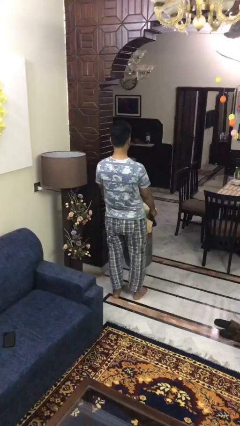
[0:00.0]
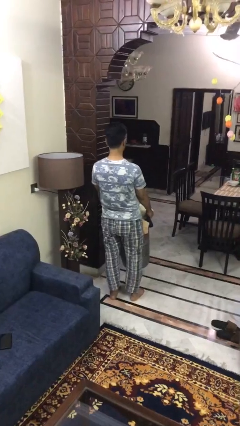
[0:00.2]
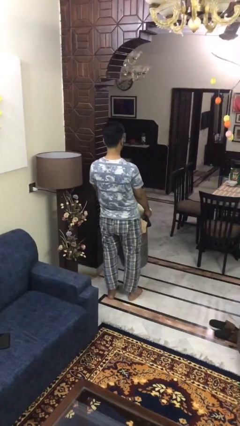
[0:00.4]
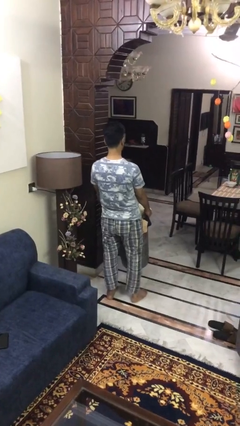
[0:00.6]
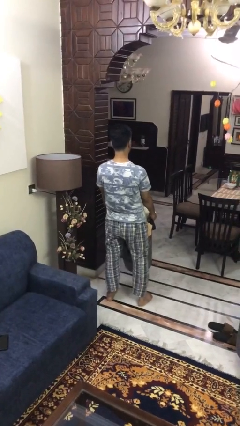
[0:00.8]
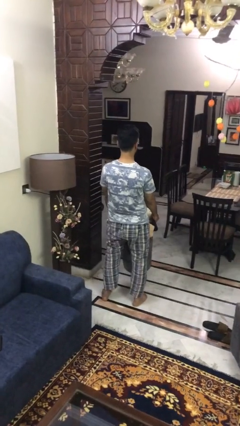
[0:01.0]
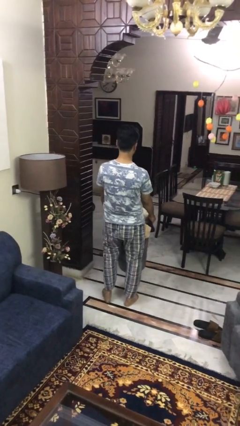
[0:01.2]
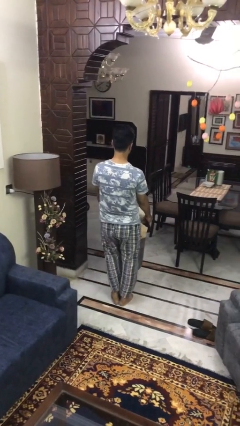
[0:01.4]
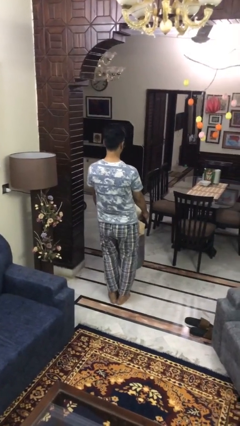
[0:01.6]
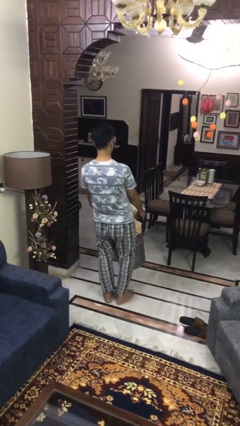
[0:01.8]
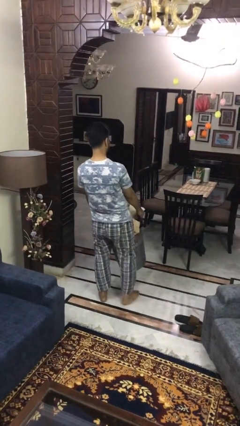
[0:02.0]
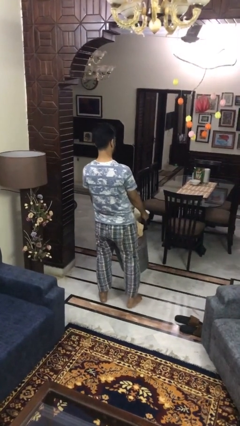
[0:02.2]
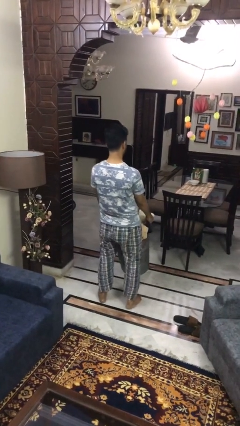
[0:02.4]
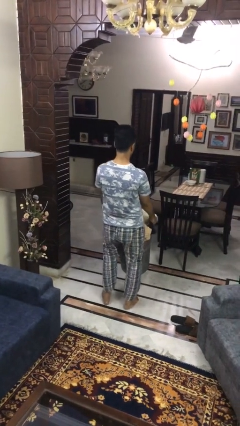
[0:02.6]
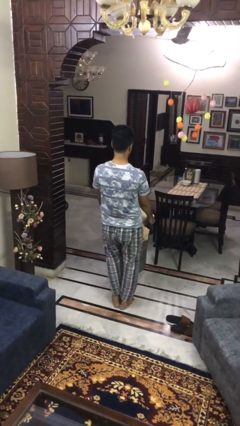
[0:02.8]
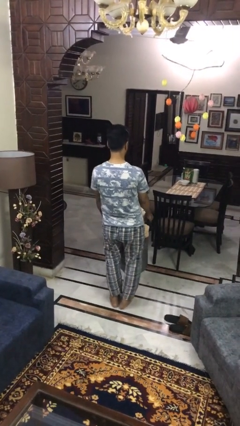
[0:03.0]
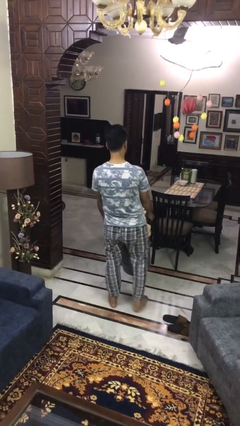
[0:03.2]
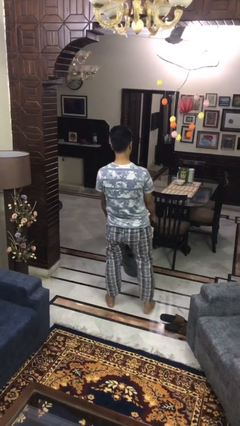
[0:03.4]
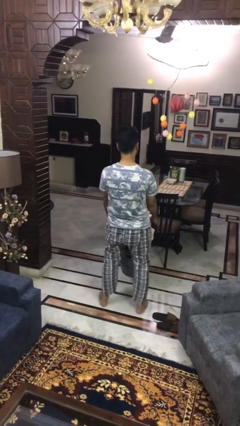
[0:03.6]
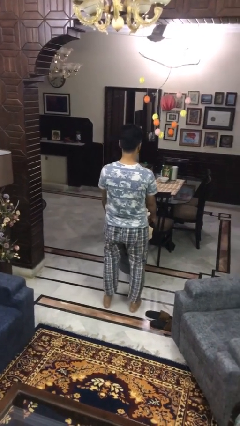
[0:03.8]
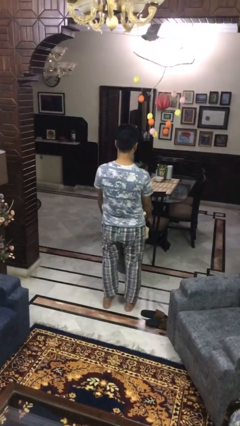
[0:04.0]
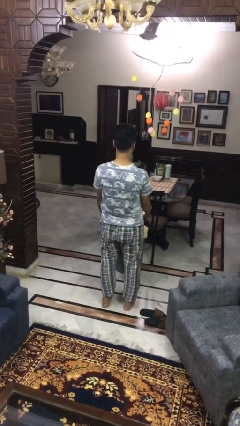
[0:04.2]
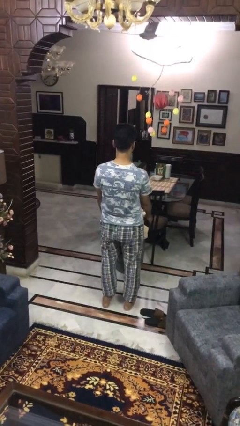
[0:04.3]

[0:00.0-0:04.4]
person carries laundry basket

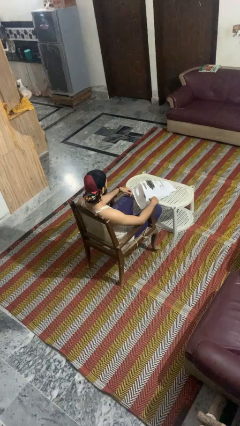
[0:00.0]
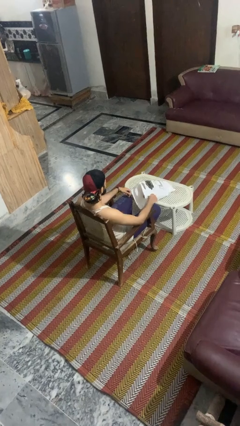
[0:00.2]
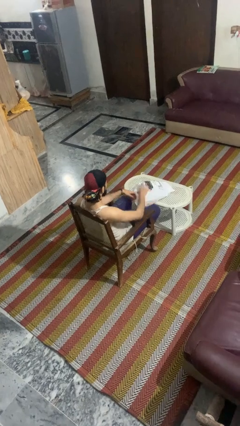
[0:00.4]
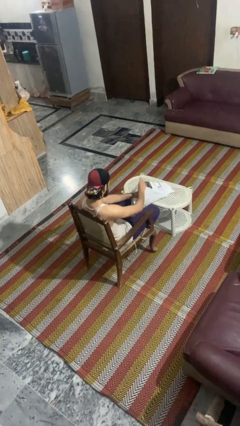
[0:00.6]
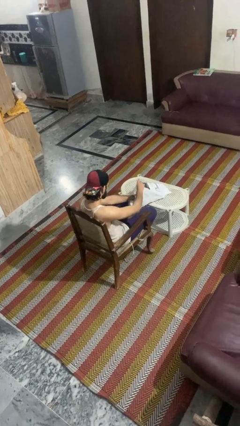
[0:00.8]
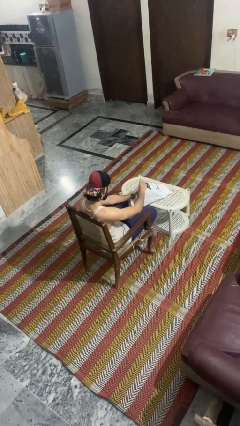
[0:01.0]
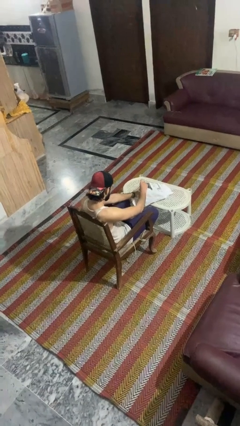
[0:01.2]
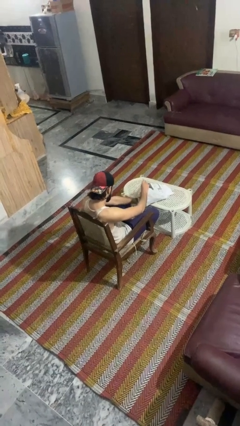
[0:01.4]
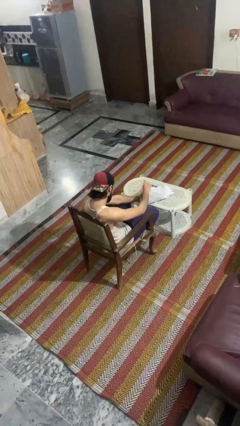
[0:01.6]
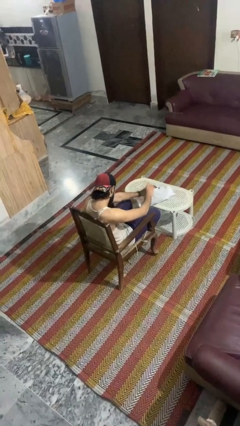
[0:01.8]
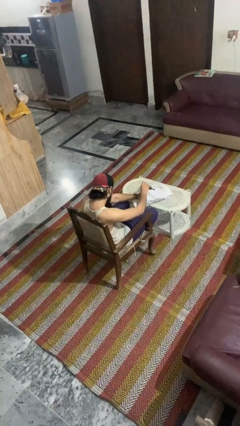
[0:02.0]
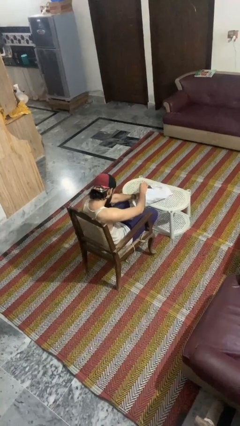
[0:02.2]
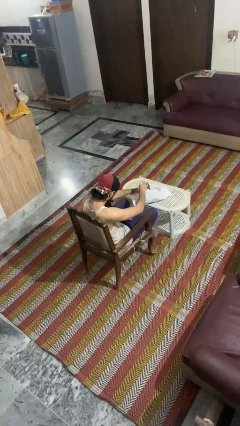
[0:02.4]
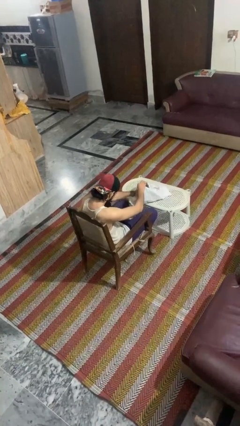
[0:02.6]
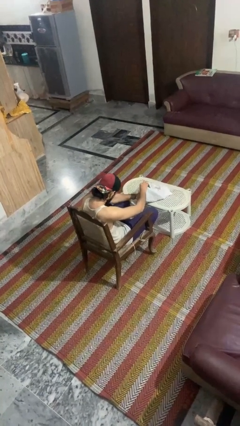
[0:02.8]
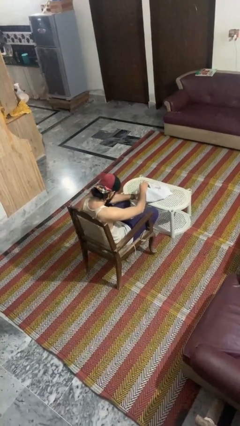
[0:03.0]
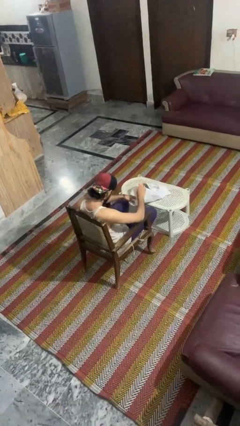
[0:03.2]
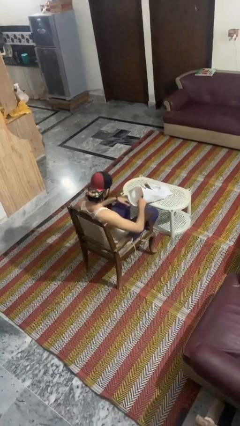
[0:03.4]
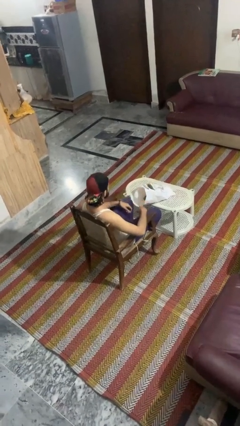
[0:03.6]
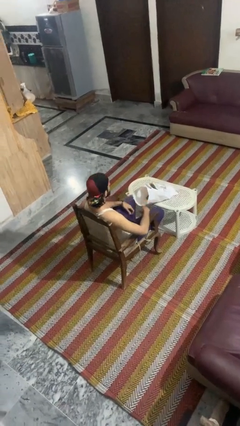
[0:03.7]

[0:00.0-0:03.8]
person searches in bag

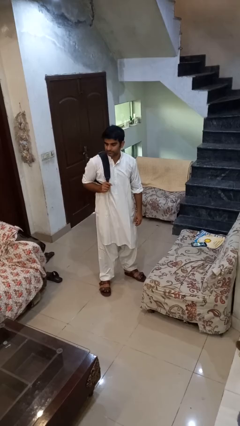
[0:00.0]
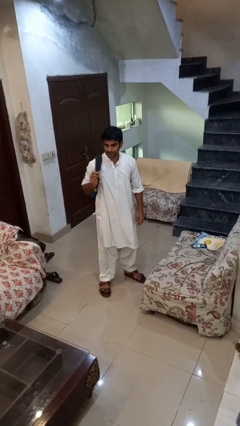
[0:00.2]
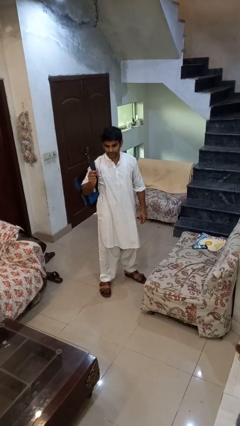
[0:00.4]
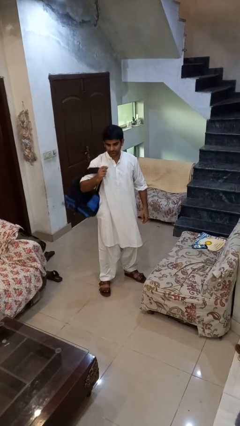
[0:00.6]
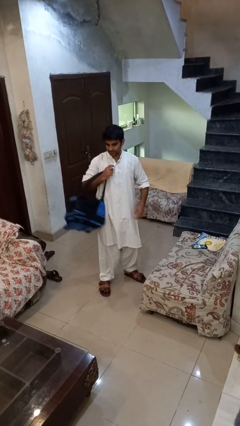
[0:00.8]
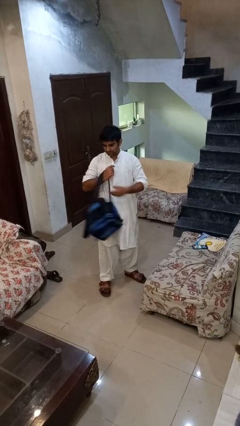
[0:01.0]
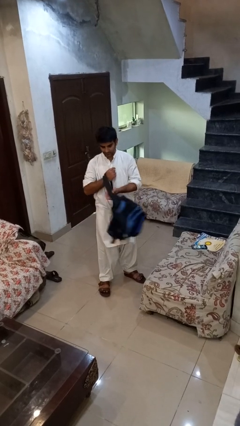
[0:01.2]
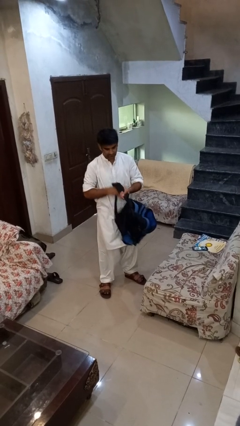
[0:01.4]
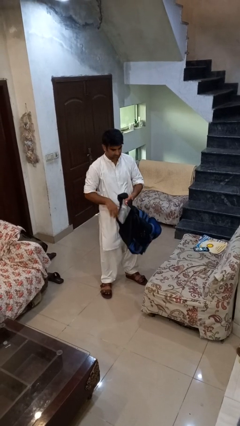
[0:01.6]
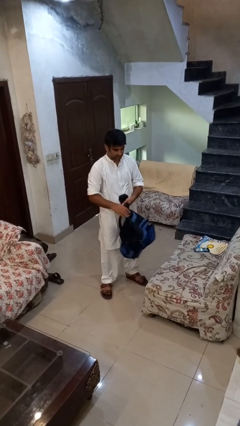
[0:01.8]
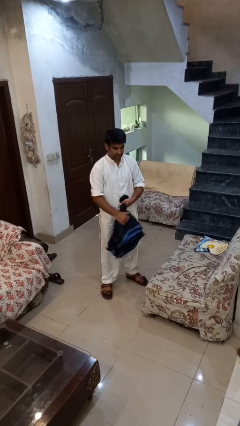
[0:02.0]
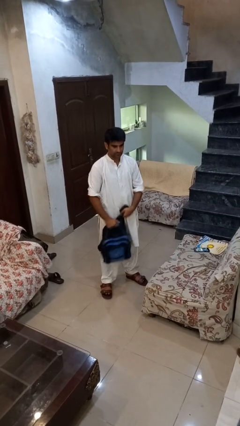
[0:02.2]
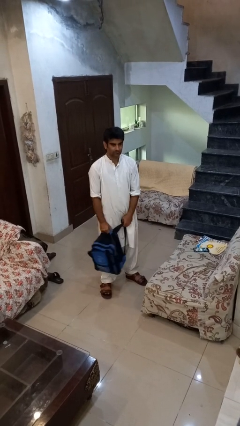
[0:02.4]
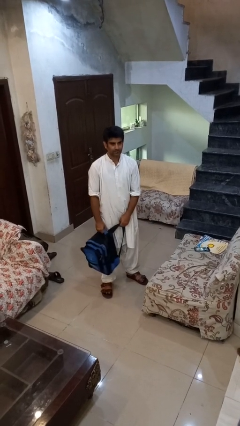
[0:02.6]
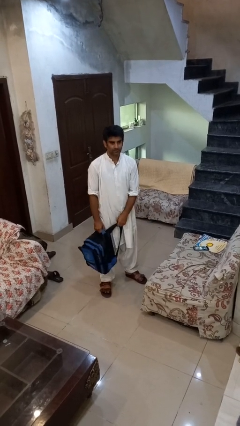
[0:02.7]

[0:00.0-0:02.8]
person takes off backpack

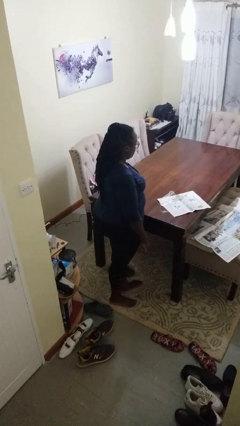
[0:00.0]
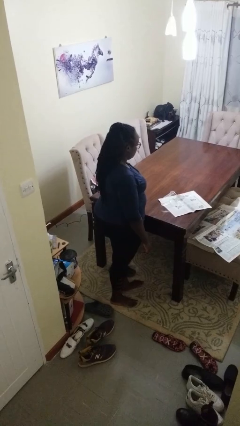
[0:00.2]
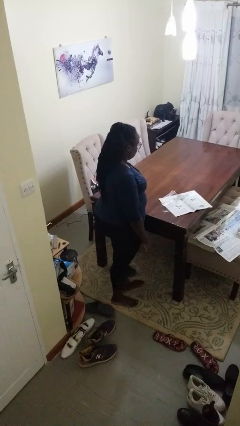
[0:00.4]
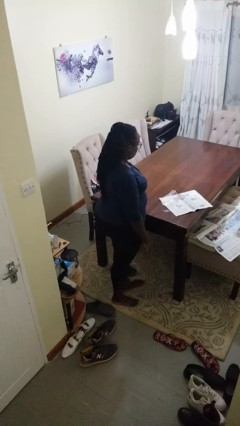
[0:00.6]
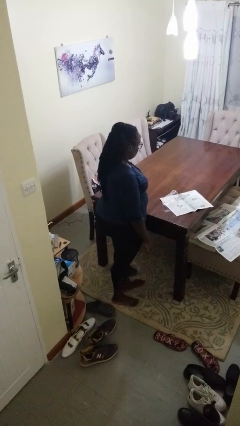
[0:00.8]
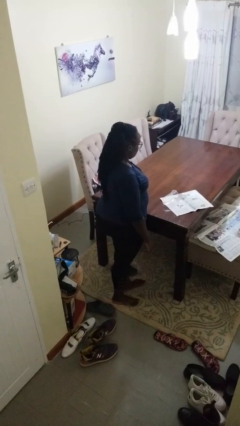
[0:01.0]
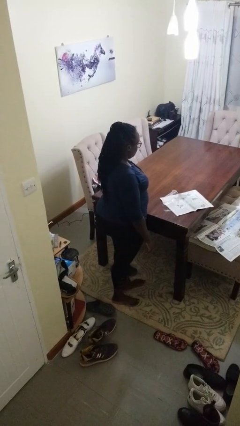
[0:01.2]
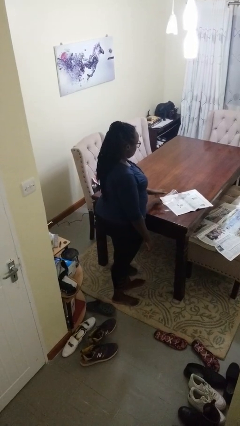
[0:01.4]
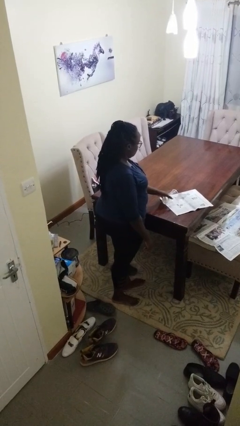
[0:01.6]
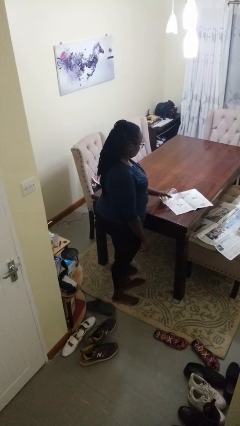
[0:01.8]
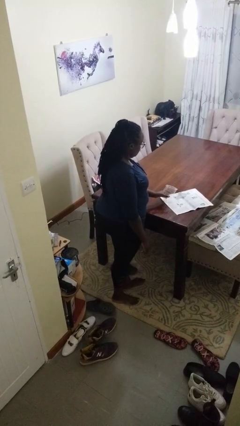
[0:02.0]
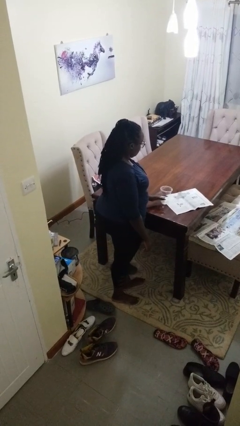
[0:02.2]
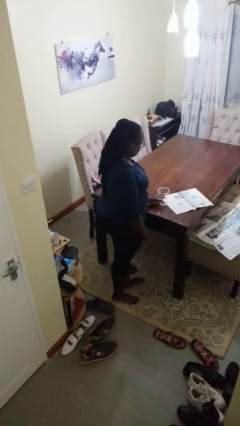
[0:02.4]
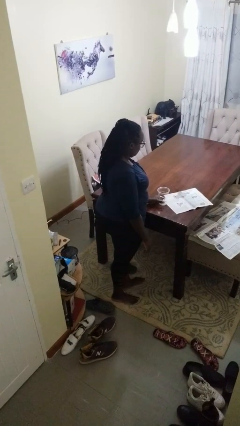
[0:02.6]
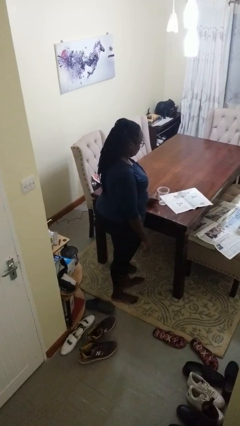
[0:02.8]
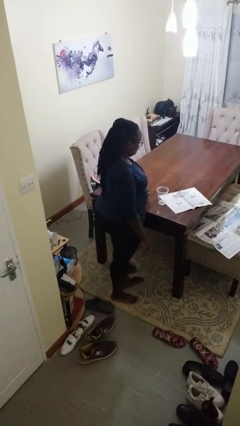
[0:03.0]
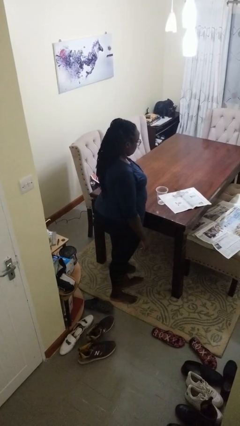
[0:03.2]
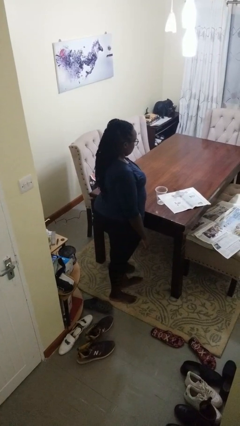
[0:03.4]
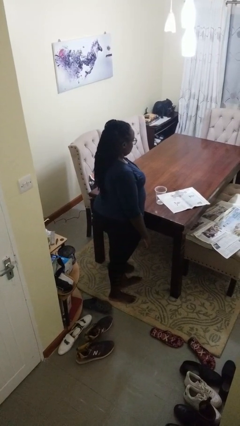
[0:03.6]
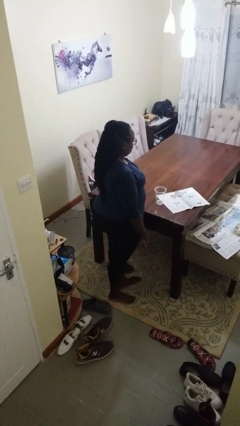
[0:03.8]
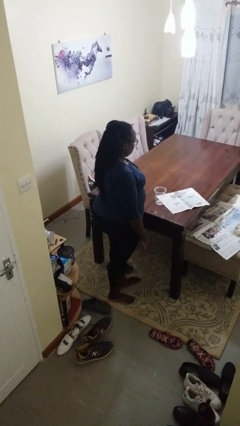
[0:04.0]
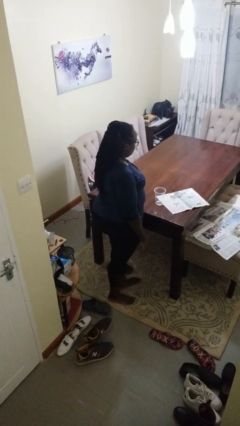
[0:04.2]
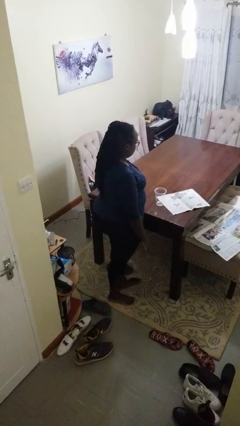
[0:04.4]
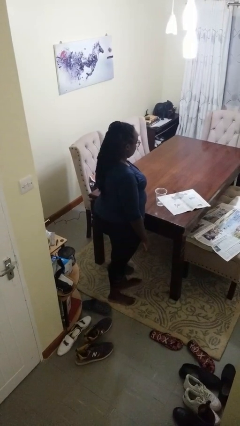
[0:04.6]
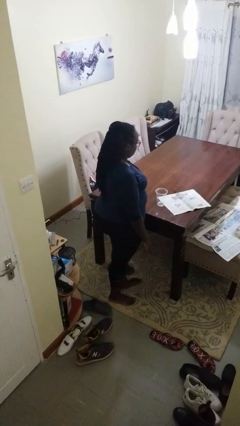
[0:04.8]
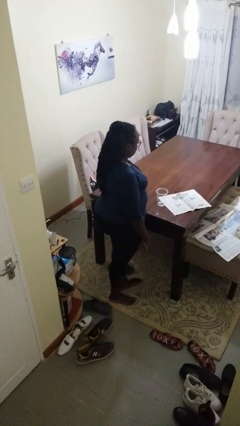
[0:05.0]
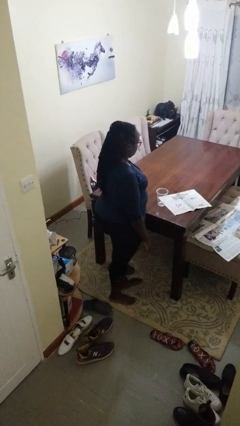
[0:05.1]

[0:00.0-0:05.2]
person sets upright glass

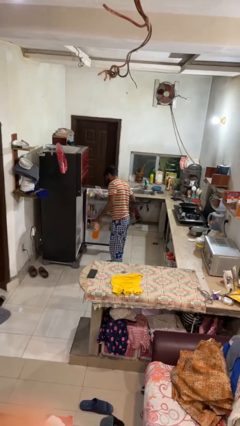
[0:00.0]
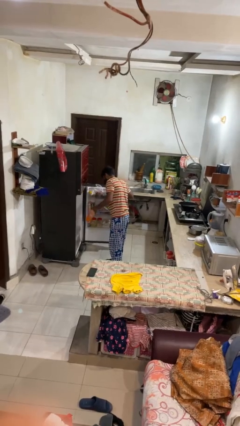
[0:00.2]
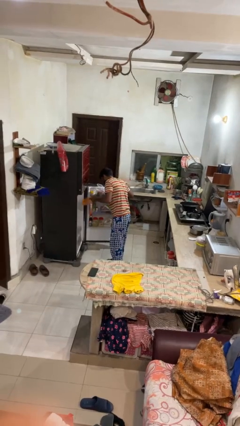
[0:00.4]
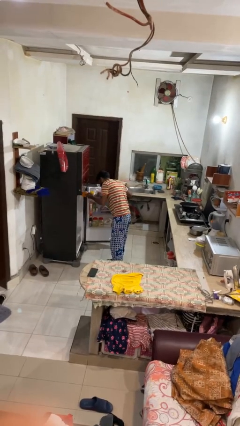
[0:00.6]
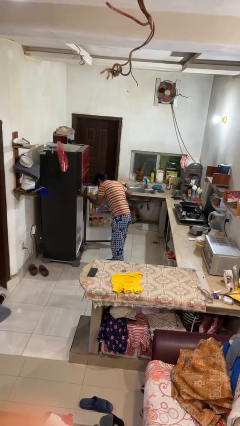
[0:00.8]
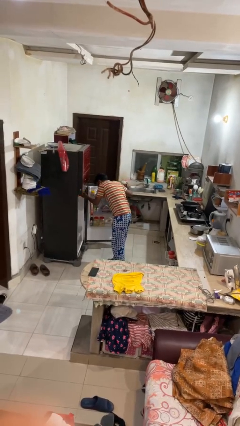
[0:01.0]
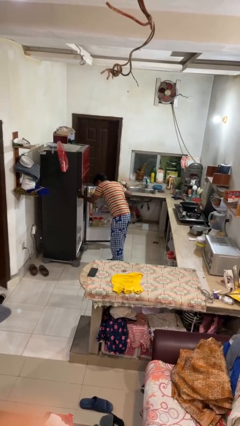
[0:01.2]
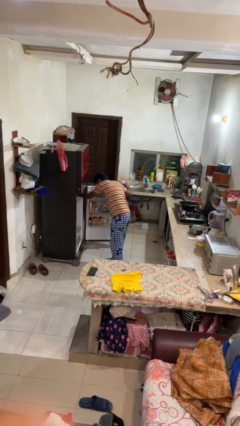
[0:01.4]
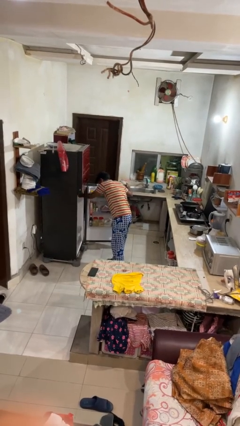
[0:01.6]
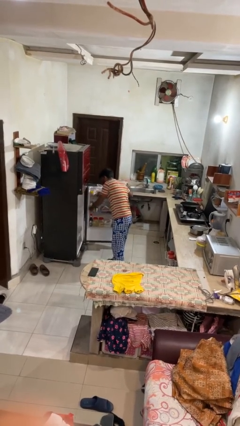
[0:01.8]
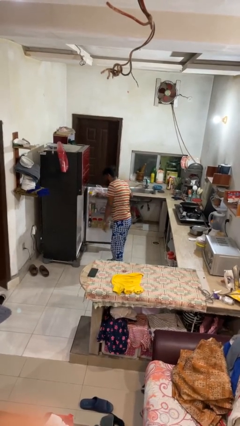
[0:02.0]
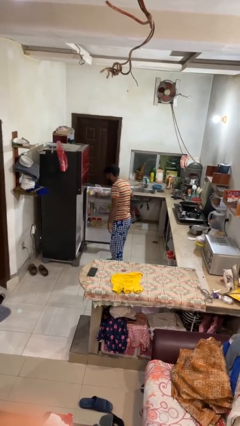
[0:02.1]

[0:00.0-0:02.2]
person puts object into refrigerator
